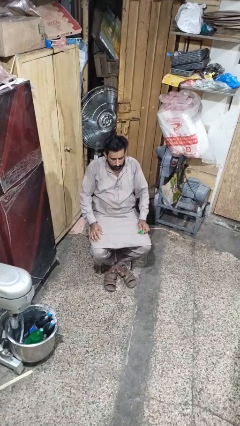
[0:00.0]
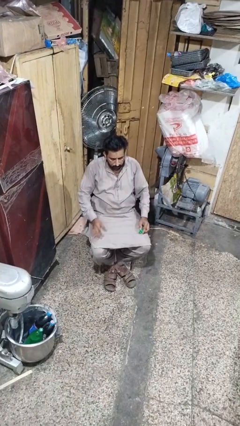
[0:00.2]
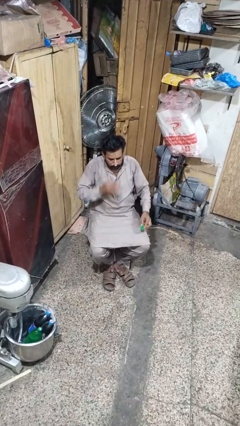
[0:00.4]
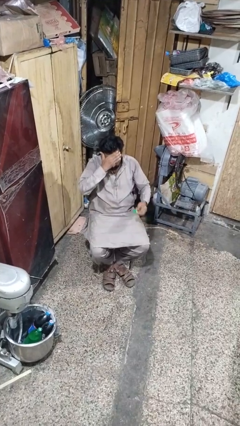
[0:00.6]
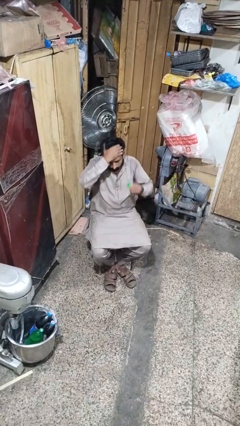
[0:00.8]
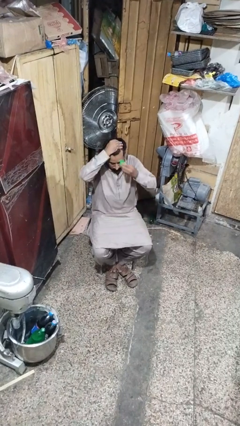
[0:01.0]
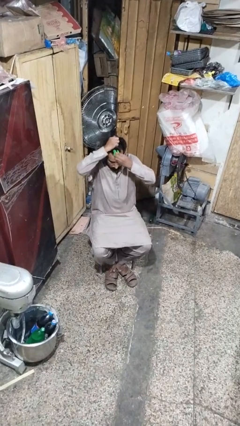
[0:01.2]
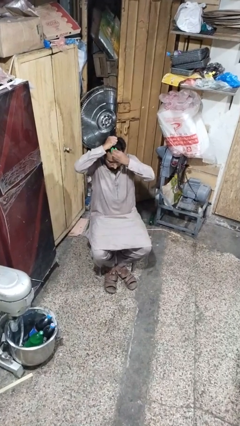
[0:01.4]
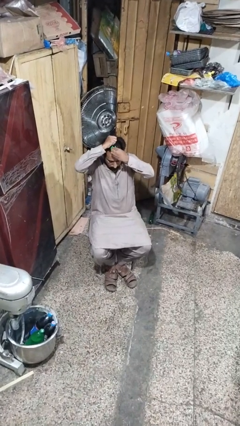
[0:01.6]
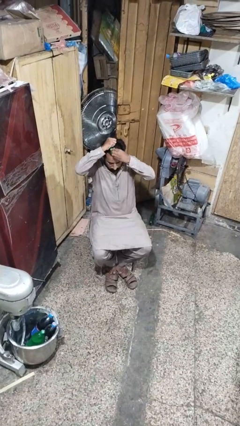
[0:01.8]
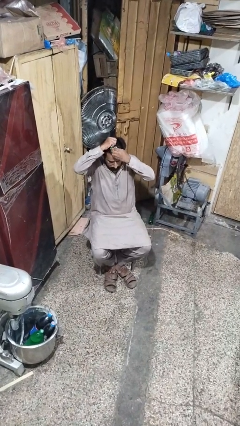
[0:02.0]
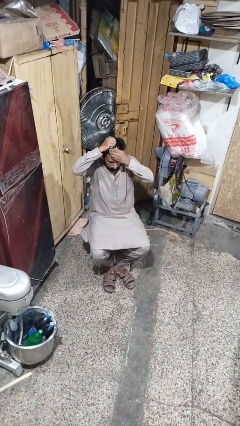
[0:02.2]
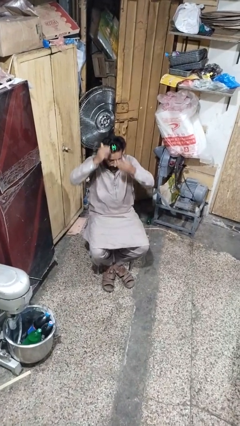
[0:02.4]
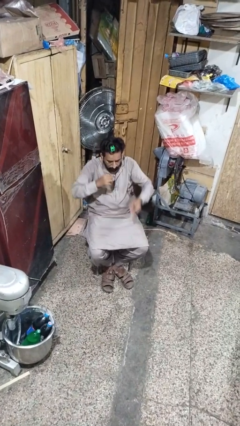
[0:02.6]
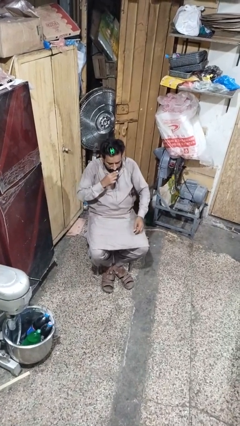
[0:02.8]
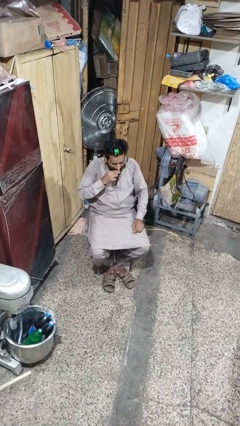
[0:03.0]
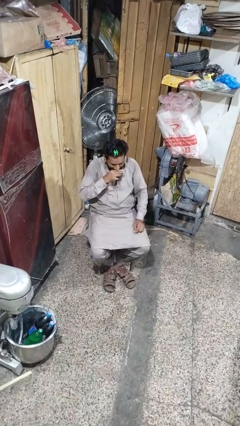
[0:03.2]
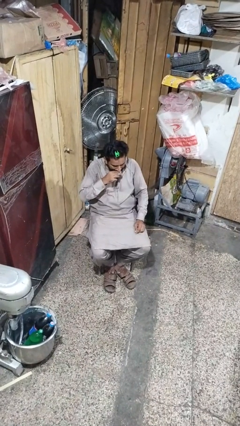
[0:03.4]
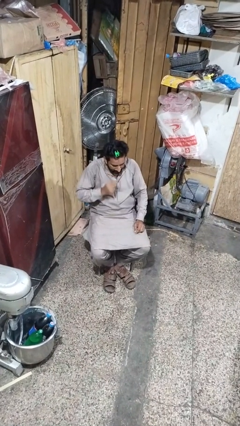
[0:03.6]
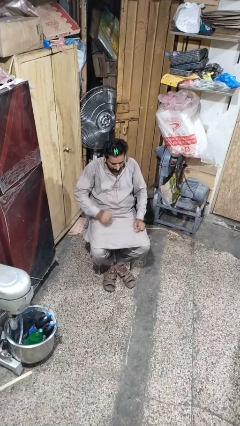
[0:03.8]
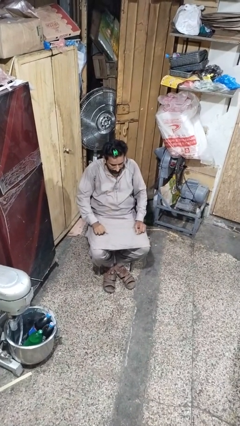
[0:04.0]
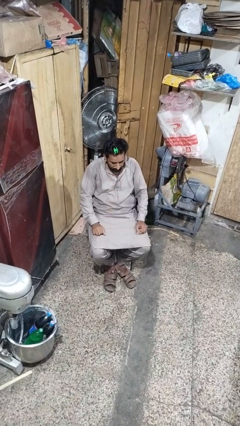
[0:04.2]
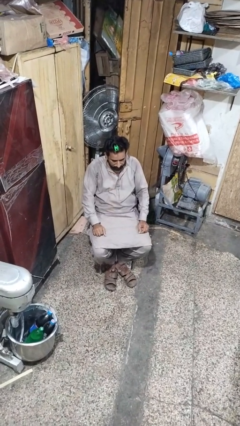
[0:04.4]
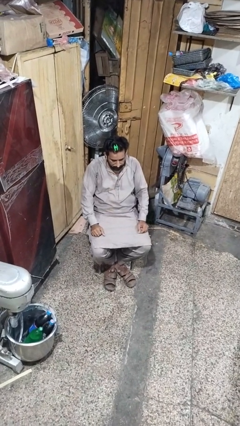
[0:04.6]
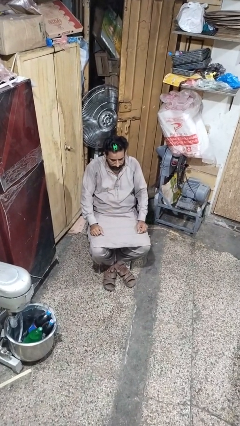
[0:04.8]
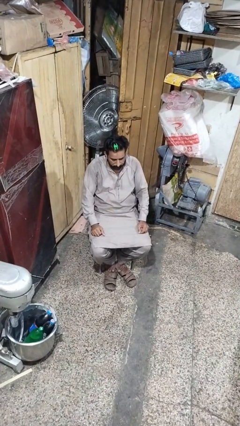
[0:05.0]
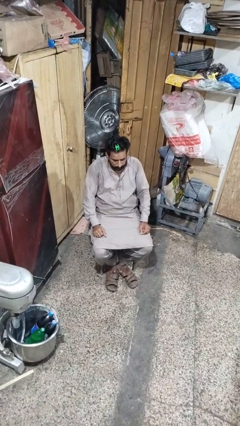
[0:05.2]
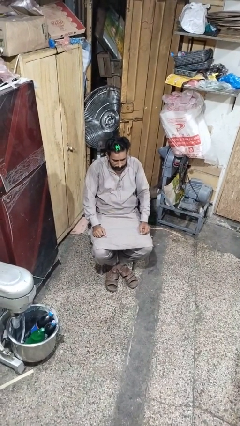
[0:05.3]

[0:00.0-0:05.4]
person puts hair in ponytail

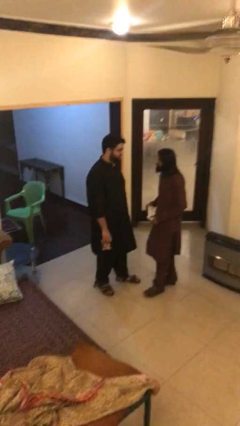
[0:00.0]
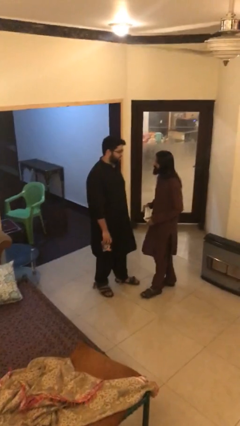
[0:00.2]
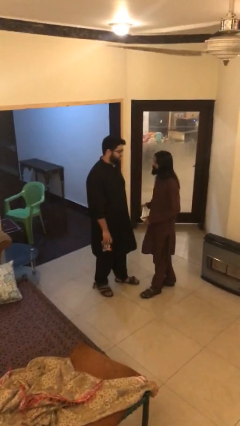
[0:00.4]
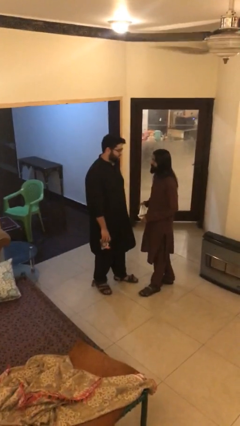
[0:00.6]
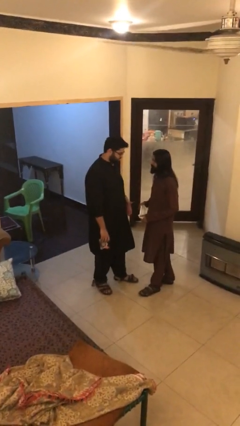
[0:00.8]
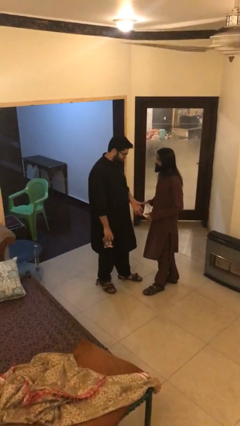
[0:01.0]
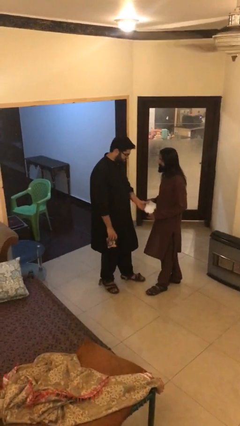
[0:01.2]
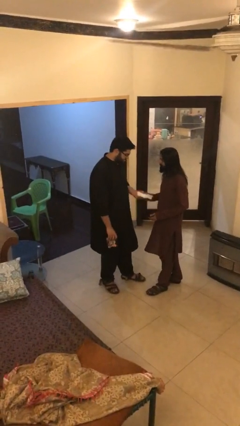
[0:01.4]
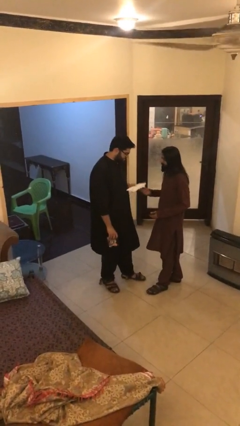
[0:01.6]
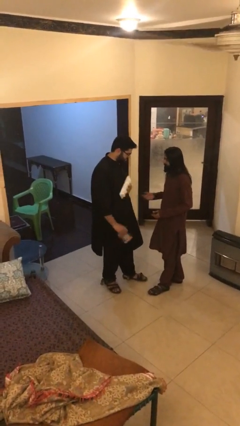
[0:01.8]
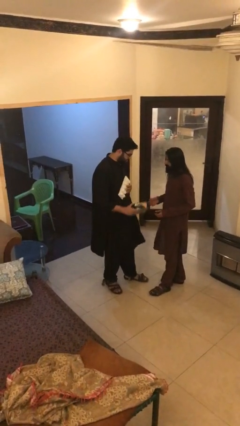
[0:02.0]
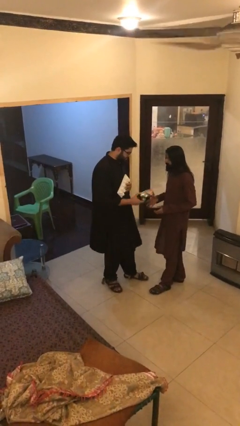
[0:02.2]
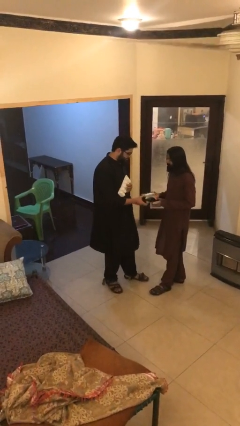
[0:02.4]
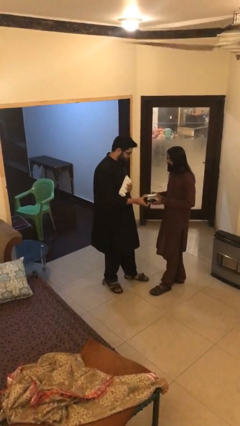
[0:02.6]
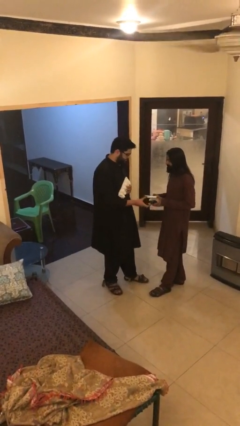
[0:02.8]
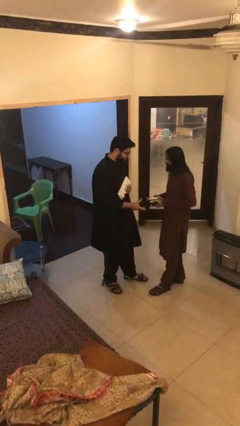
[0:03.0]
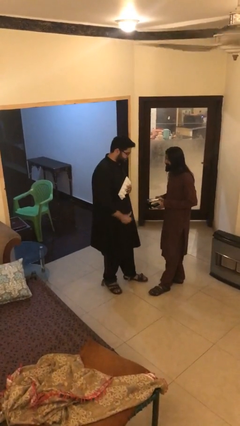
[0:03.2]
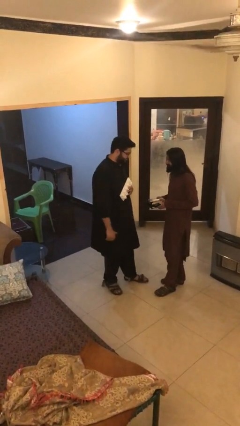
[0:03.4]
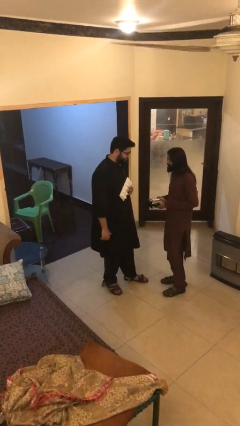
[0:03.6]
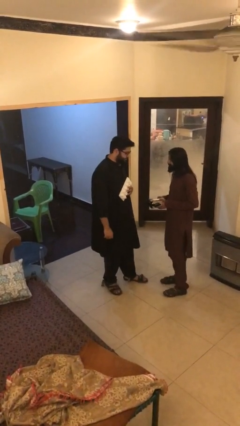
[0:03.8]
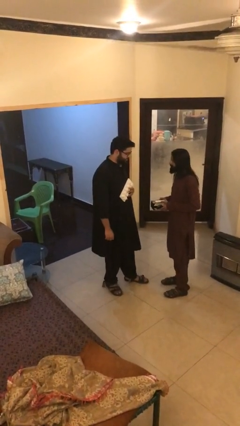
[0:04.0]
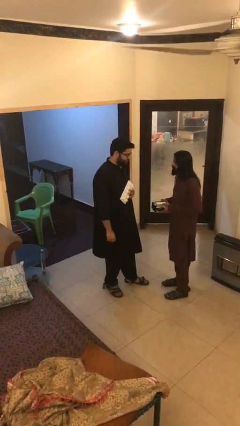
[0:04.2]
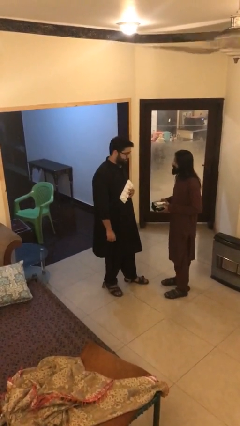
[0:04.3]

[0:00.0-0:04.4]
person transfers object to person

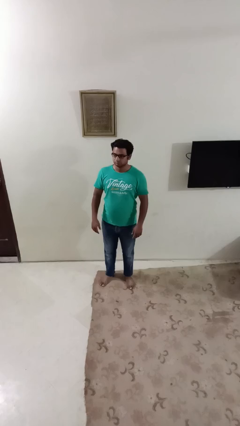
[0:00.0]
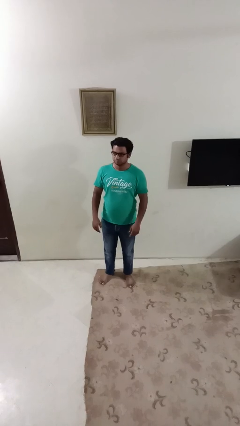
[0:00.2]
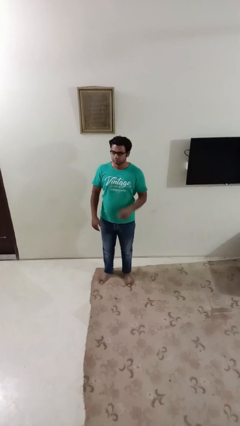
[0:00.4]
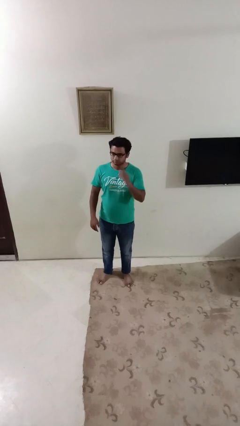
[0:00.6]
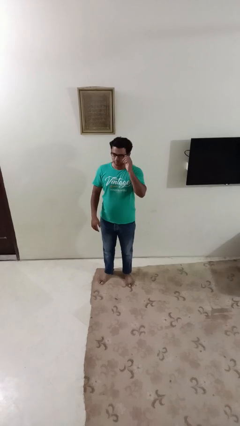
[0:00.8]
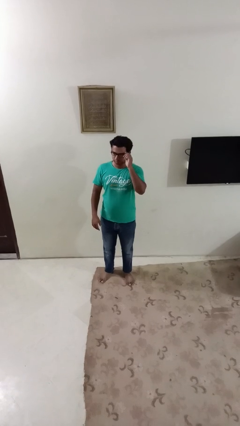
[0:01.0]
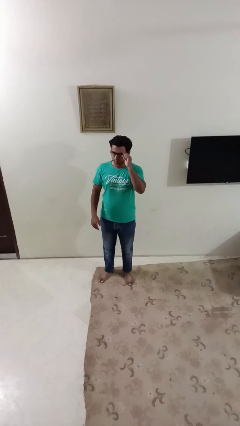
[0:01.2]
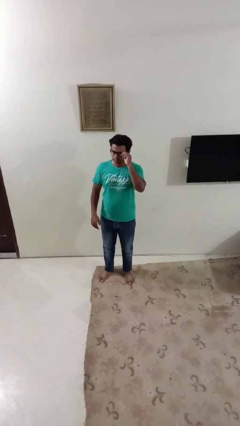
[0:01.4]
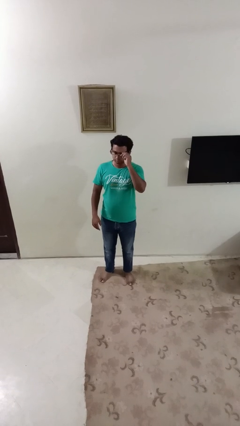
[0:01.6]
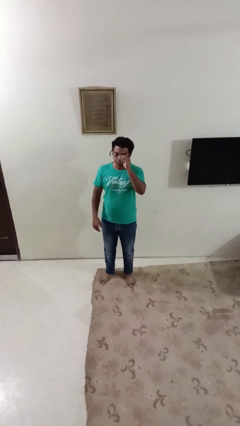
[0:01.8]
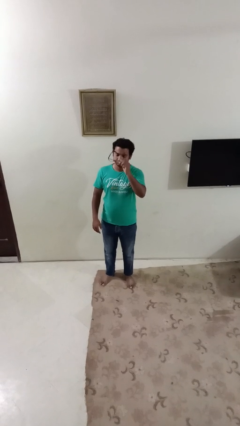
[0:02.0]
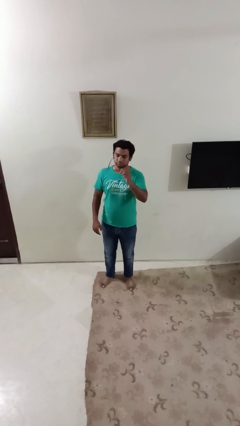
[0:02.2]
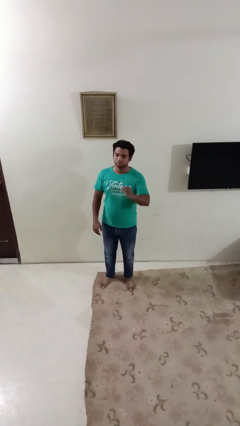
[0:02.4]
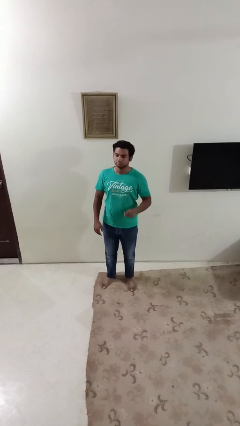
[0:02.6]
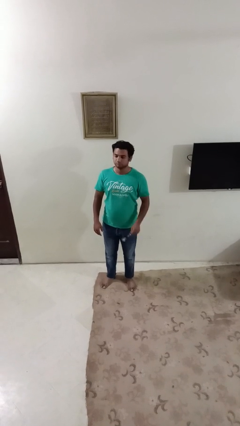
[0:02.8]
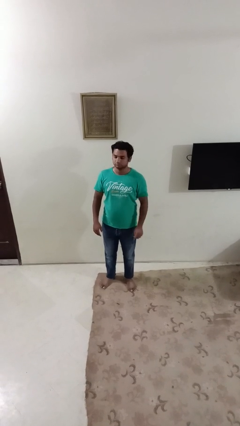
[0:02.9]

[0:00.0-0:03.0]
person takes off glasses

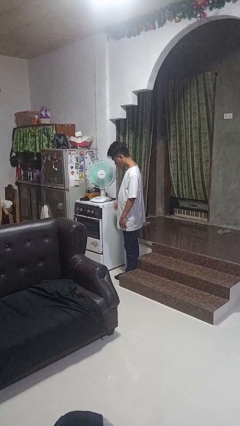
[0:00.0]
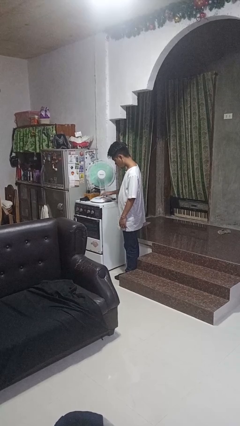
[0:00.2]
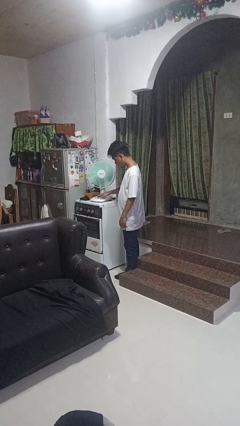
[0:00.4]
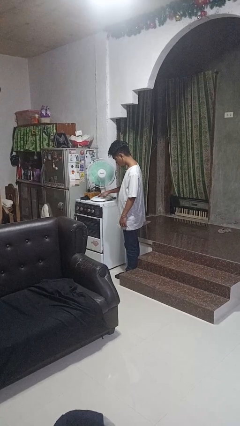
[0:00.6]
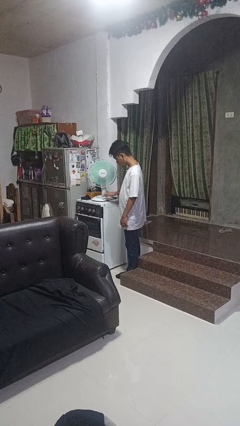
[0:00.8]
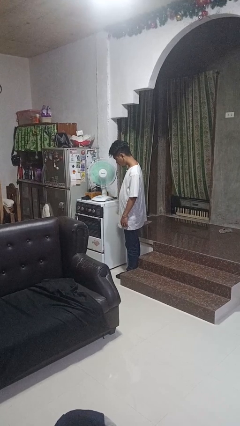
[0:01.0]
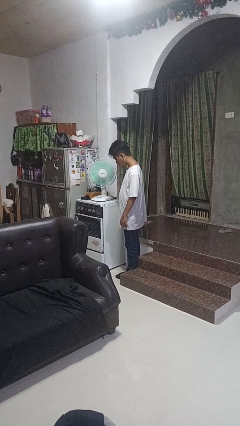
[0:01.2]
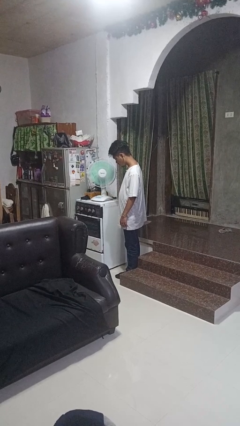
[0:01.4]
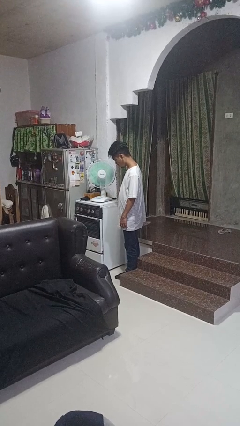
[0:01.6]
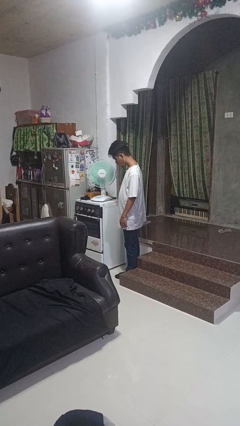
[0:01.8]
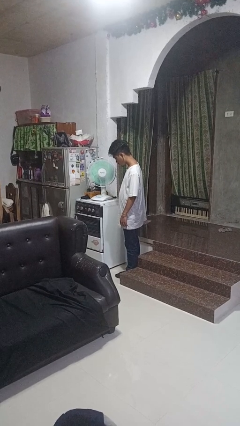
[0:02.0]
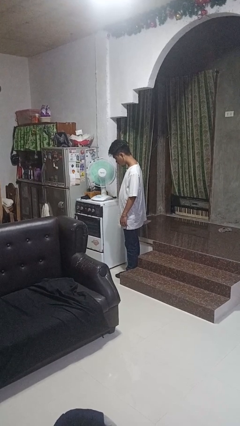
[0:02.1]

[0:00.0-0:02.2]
person turns on fan

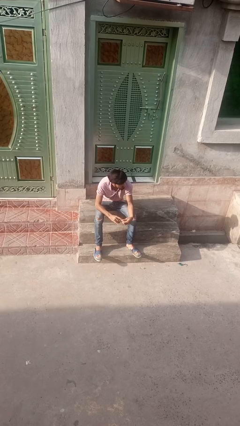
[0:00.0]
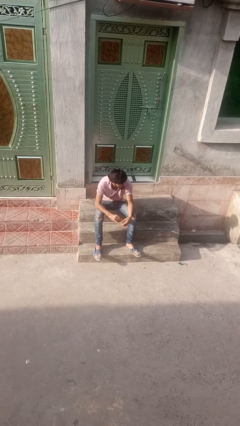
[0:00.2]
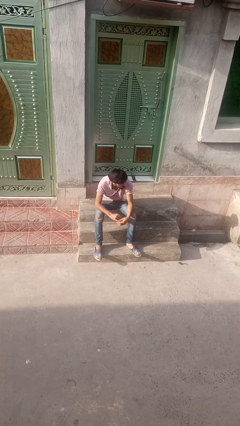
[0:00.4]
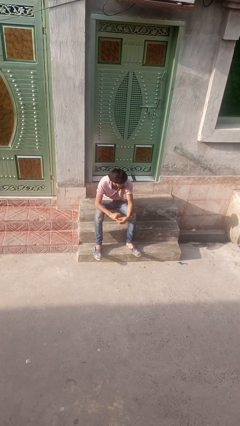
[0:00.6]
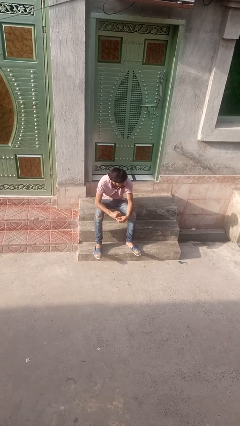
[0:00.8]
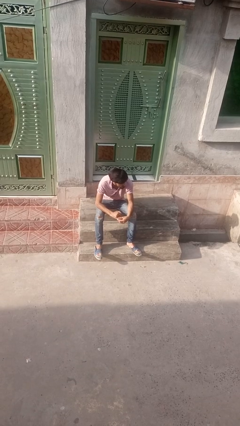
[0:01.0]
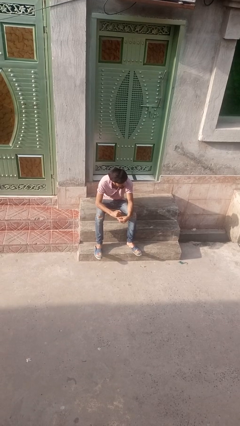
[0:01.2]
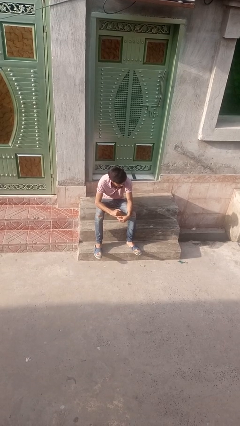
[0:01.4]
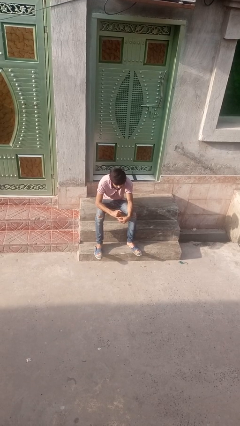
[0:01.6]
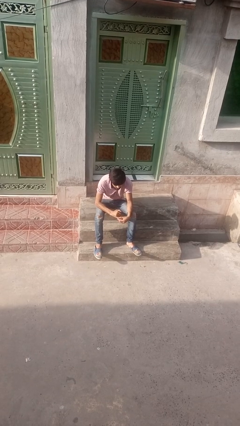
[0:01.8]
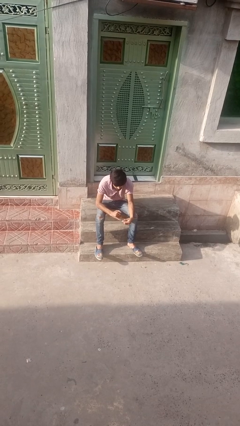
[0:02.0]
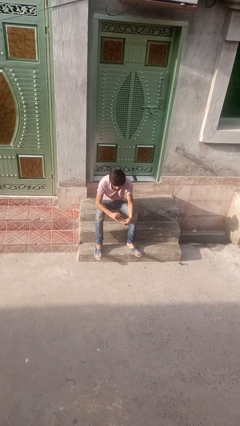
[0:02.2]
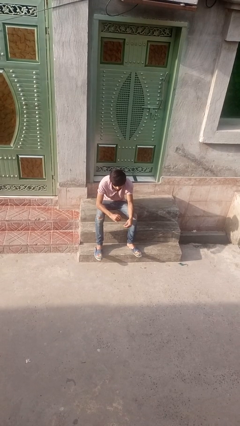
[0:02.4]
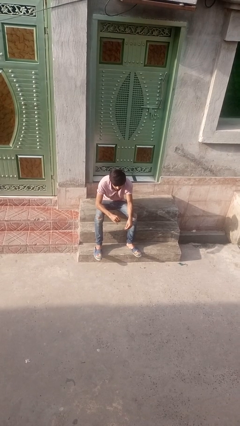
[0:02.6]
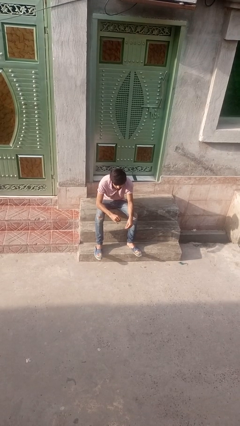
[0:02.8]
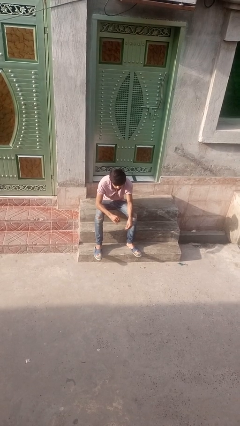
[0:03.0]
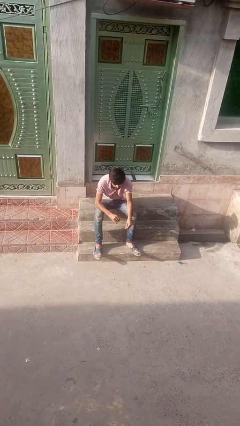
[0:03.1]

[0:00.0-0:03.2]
person takes off ring
